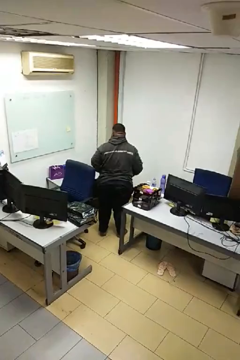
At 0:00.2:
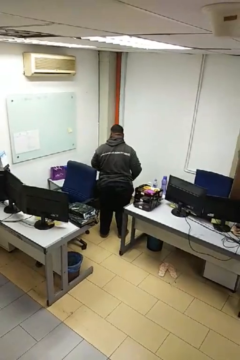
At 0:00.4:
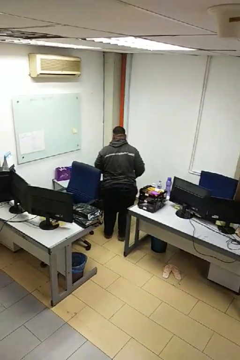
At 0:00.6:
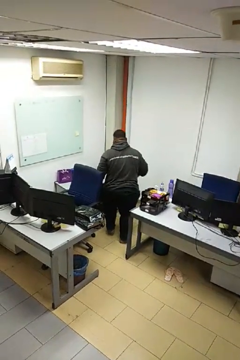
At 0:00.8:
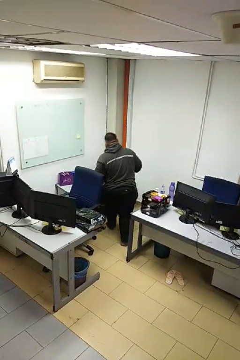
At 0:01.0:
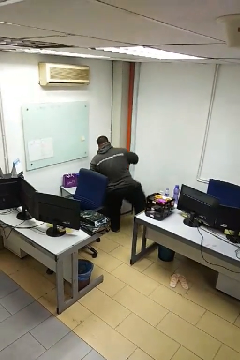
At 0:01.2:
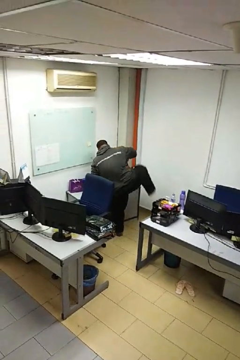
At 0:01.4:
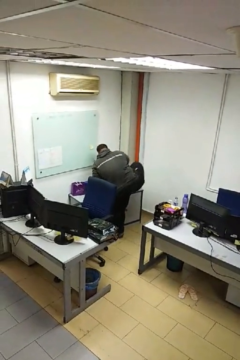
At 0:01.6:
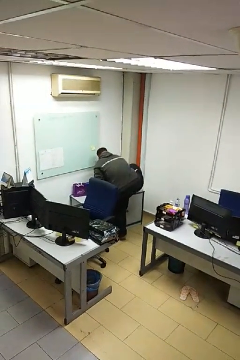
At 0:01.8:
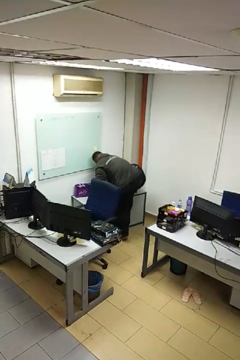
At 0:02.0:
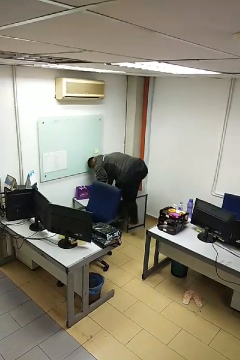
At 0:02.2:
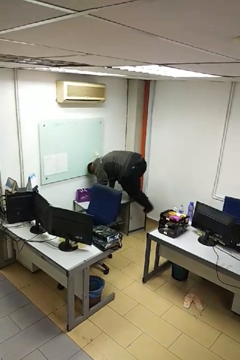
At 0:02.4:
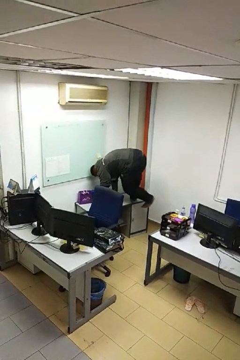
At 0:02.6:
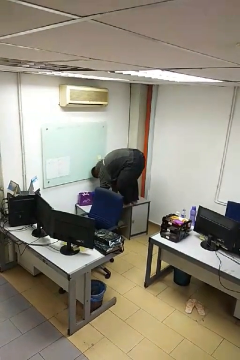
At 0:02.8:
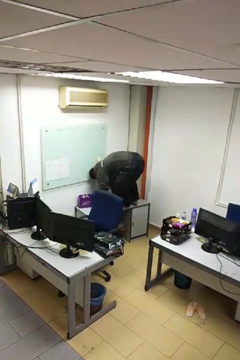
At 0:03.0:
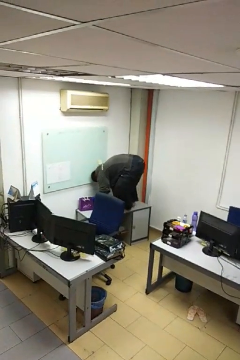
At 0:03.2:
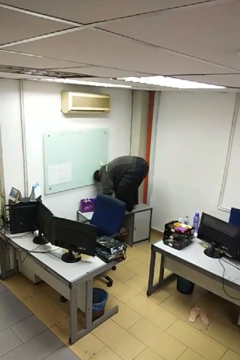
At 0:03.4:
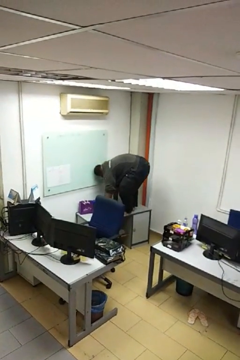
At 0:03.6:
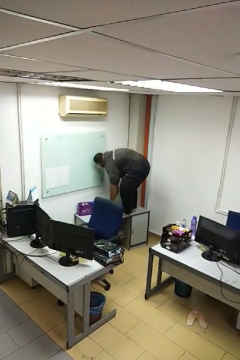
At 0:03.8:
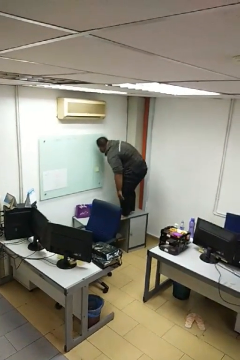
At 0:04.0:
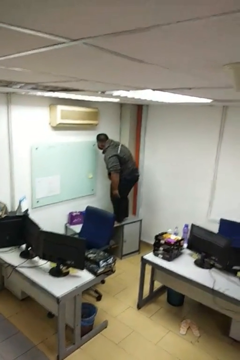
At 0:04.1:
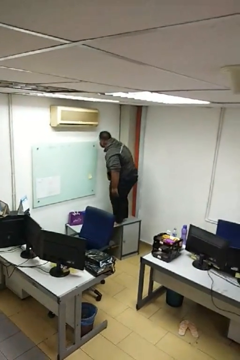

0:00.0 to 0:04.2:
person climbs on table

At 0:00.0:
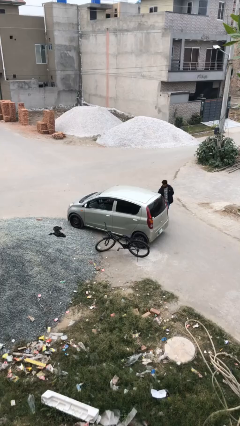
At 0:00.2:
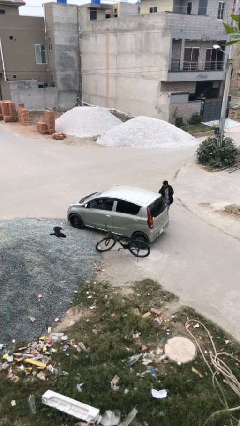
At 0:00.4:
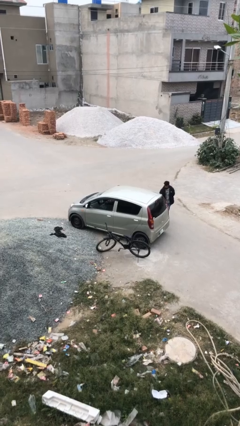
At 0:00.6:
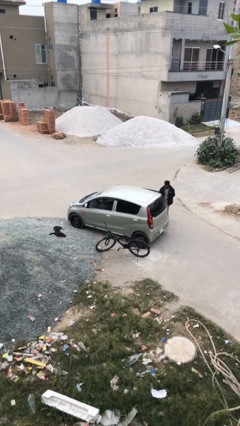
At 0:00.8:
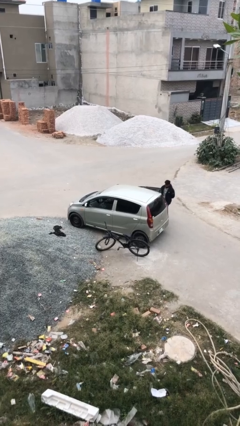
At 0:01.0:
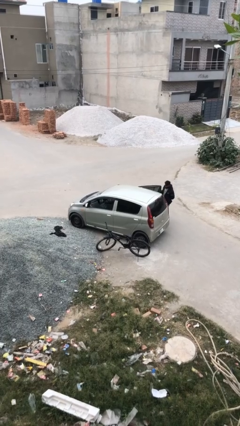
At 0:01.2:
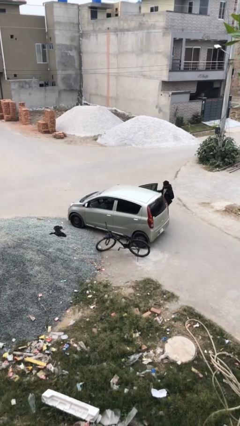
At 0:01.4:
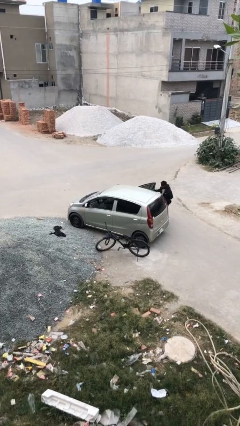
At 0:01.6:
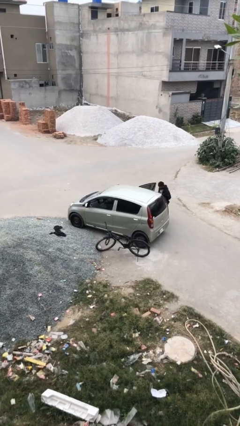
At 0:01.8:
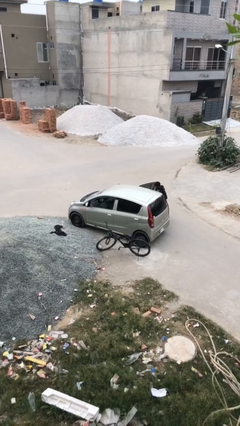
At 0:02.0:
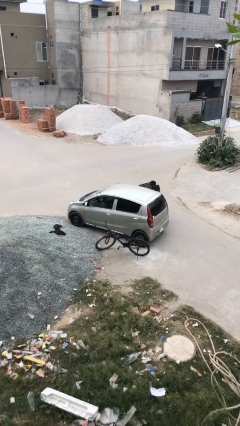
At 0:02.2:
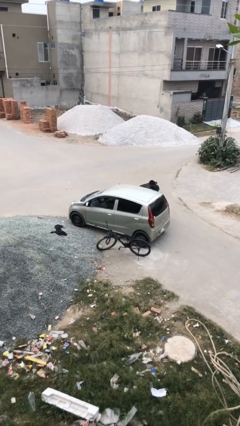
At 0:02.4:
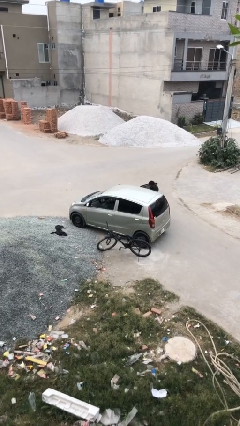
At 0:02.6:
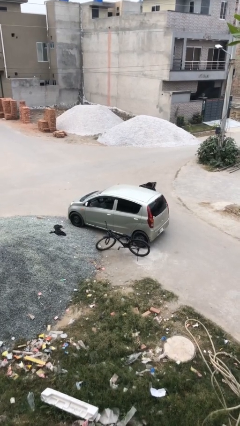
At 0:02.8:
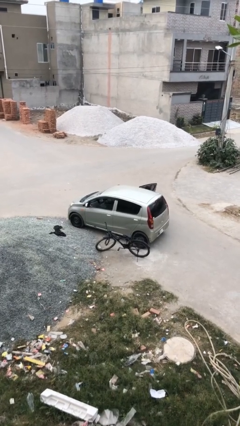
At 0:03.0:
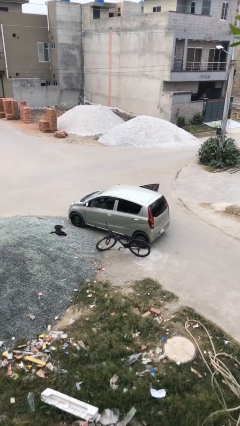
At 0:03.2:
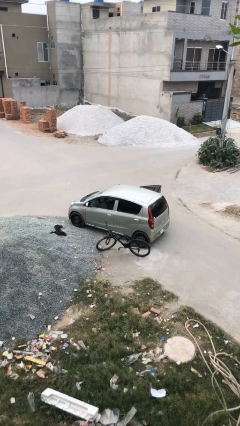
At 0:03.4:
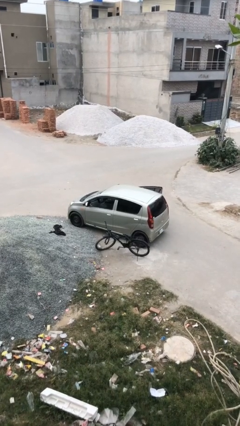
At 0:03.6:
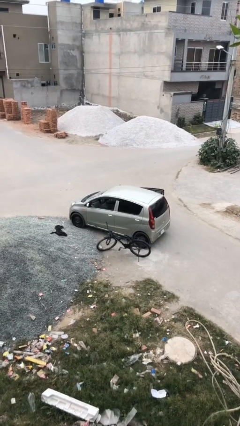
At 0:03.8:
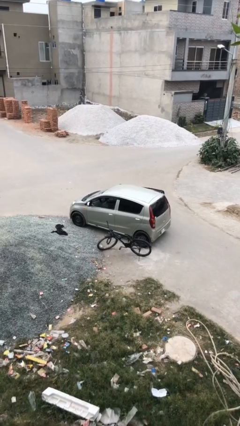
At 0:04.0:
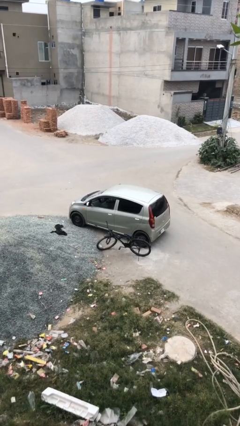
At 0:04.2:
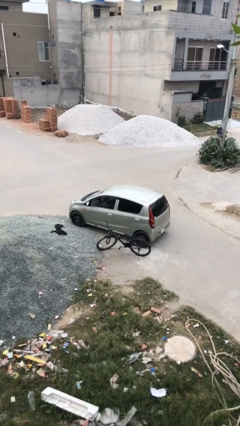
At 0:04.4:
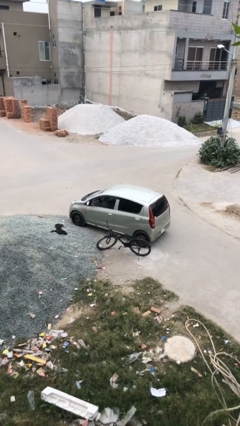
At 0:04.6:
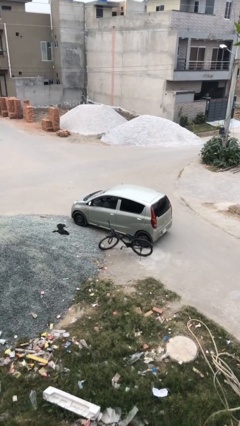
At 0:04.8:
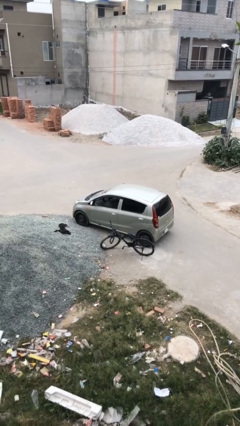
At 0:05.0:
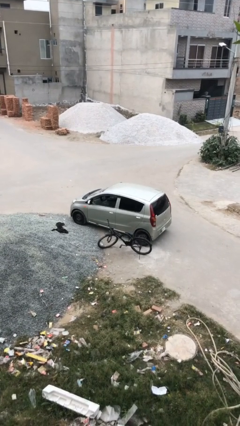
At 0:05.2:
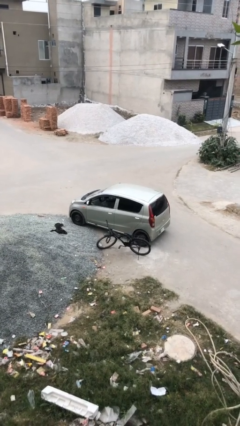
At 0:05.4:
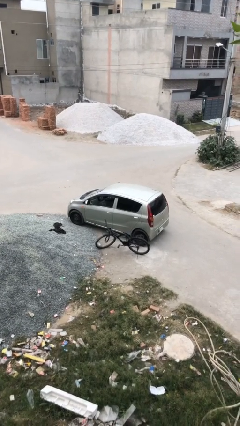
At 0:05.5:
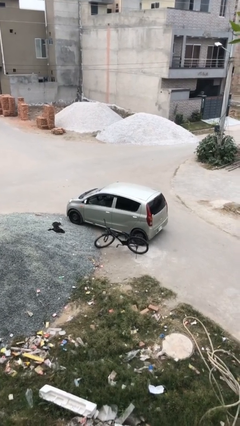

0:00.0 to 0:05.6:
car picks up person

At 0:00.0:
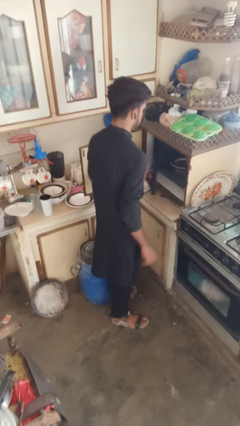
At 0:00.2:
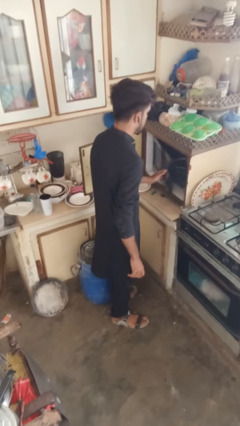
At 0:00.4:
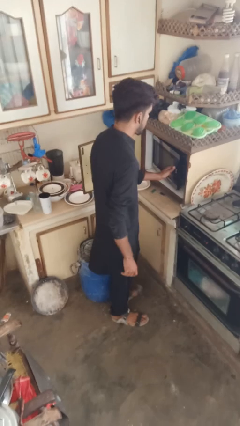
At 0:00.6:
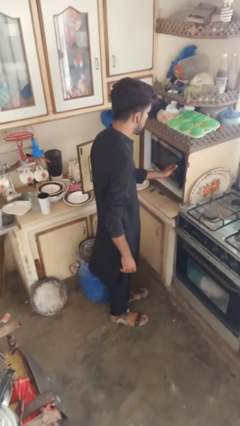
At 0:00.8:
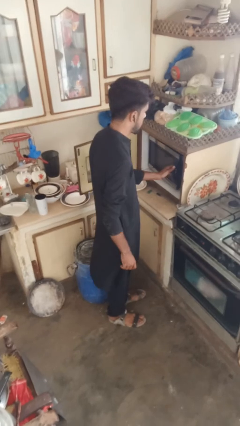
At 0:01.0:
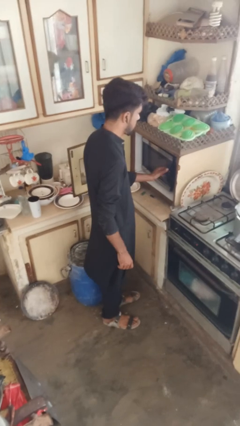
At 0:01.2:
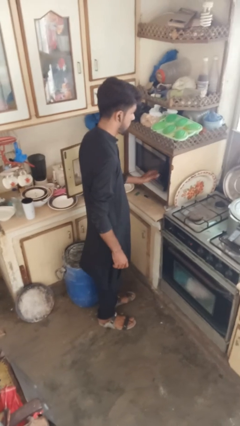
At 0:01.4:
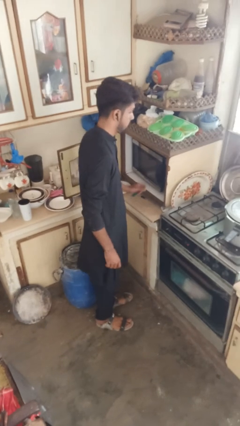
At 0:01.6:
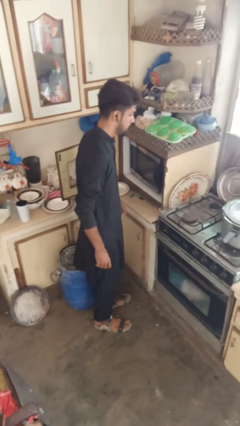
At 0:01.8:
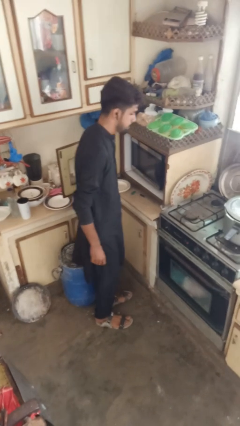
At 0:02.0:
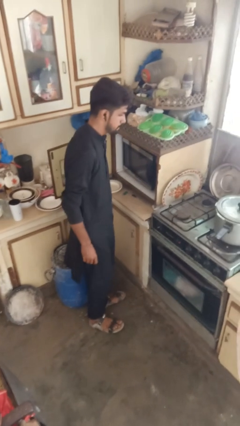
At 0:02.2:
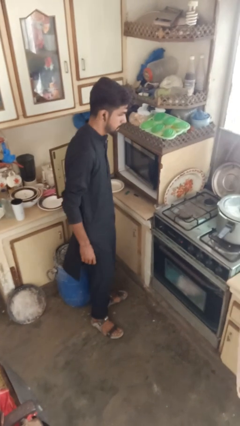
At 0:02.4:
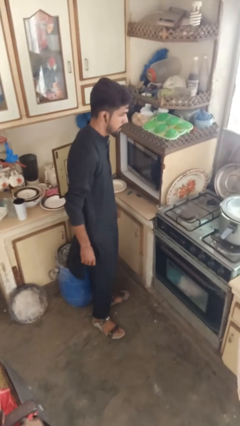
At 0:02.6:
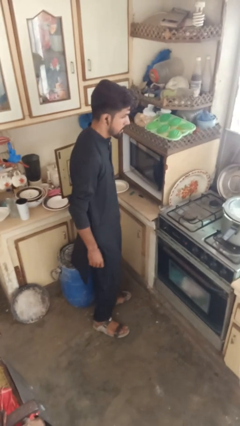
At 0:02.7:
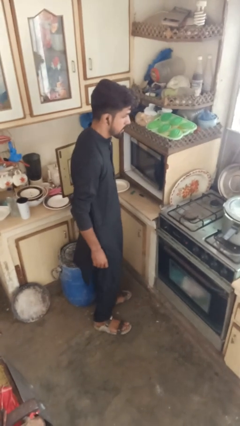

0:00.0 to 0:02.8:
person closes microwave

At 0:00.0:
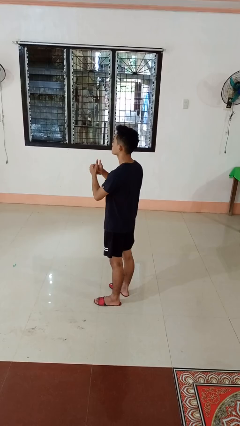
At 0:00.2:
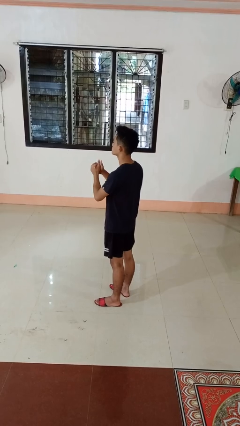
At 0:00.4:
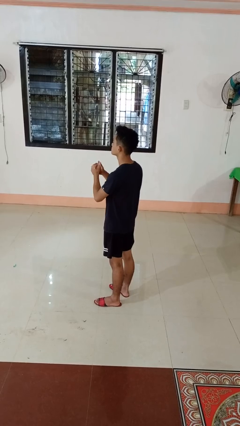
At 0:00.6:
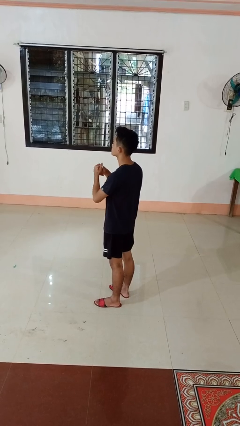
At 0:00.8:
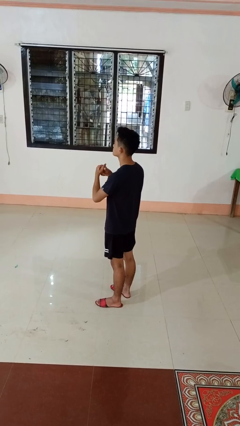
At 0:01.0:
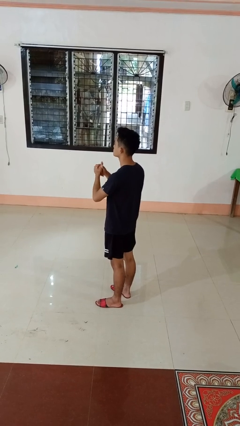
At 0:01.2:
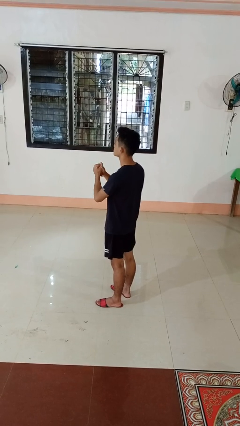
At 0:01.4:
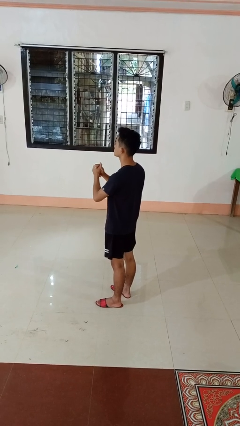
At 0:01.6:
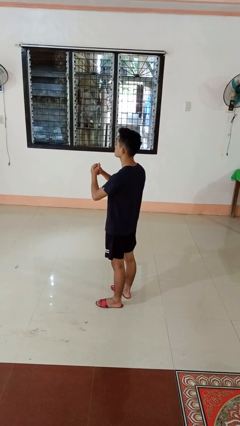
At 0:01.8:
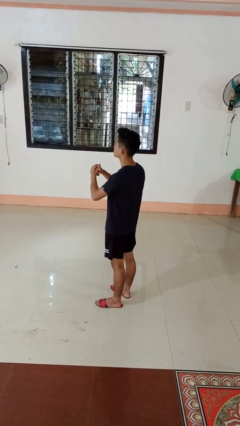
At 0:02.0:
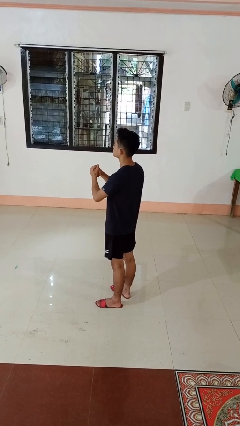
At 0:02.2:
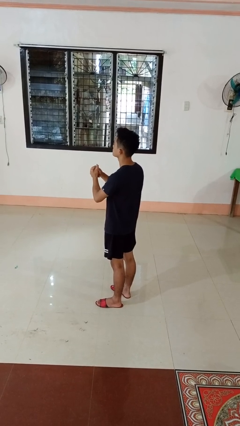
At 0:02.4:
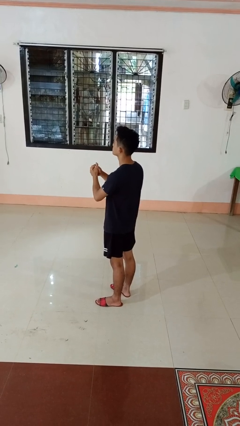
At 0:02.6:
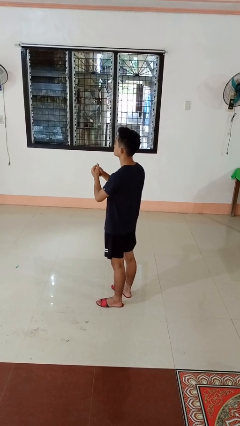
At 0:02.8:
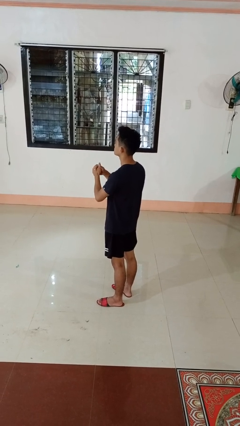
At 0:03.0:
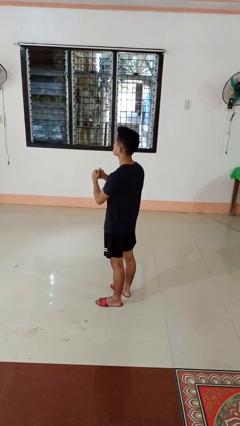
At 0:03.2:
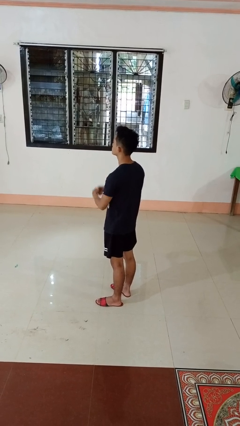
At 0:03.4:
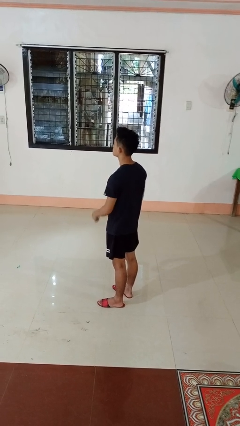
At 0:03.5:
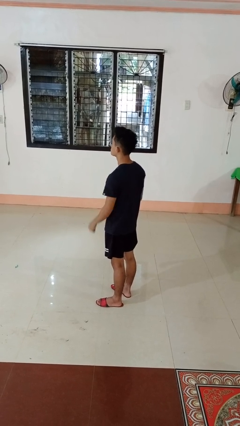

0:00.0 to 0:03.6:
person cracks knuckles

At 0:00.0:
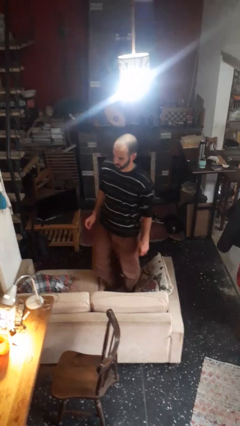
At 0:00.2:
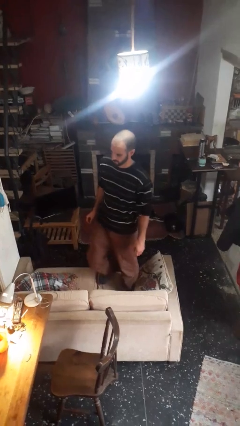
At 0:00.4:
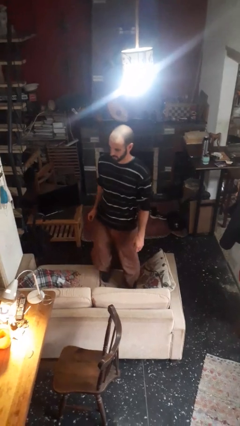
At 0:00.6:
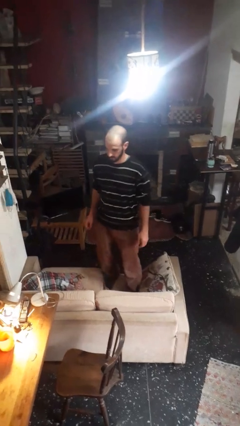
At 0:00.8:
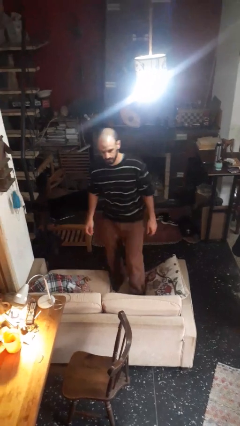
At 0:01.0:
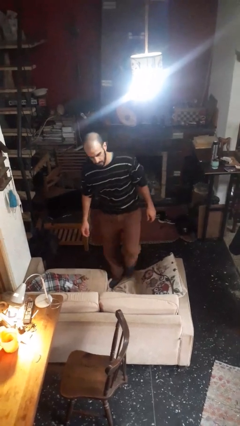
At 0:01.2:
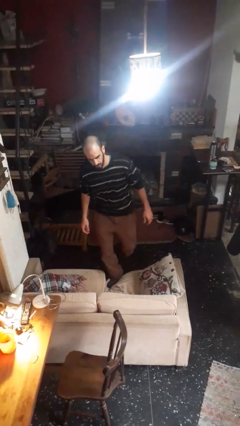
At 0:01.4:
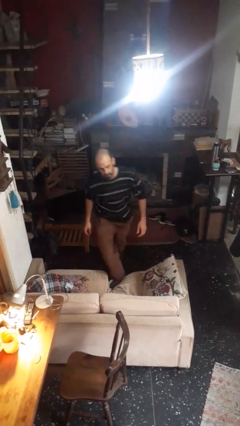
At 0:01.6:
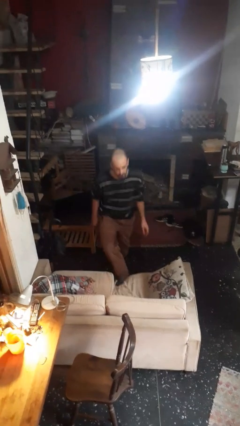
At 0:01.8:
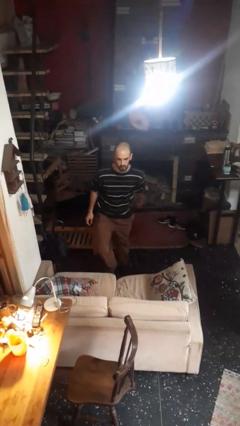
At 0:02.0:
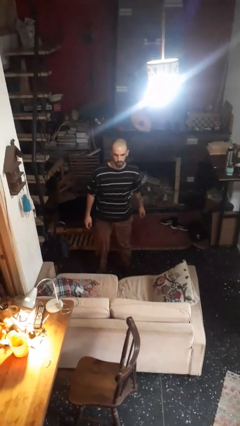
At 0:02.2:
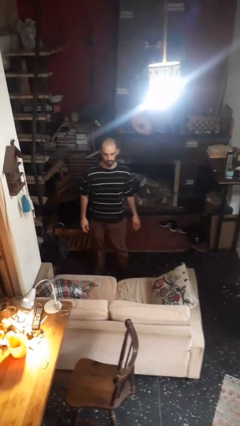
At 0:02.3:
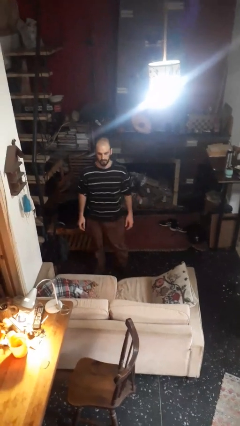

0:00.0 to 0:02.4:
person climbs off couch
